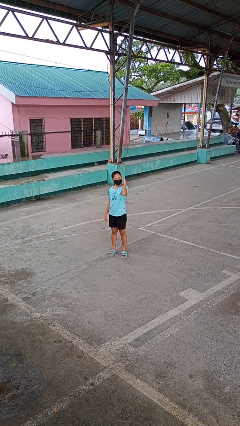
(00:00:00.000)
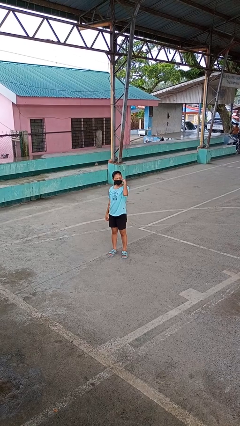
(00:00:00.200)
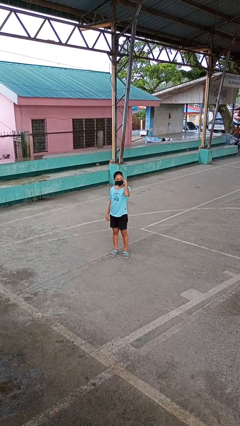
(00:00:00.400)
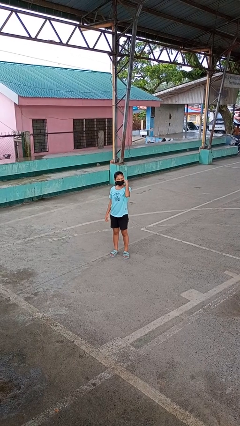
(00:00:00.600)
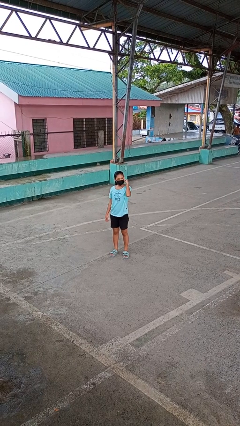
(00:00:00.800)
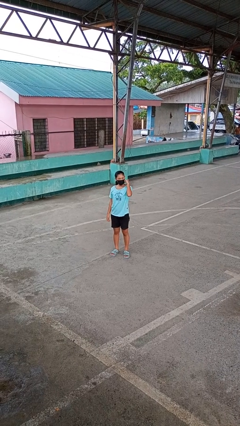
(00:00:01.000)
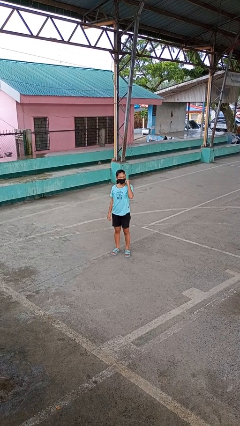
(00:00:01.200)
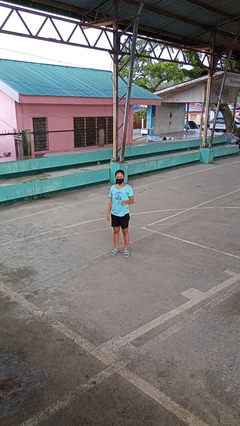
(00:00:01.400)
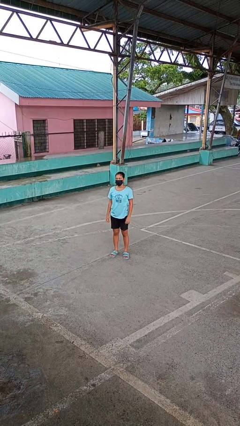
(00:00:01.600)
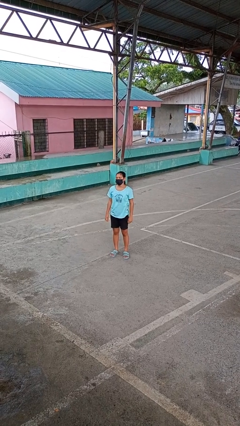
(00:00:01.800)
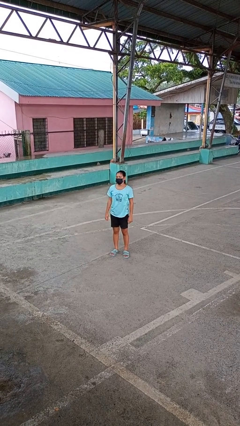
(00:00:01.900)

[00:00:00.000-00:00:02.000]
person gestures behind me

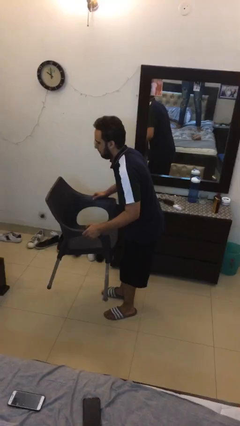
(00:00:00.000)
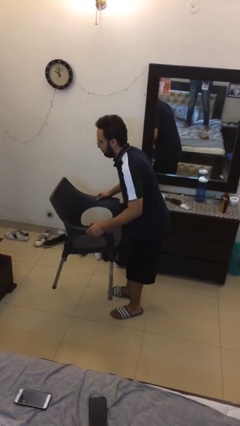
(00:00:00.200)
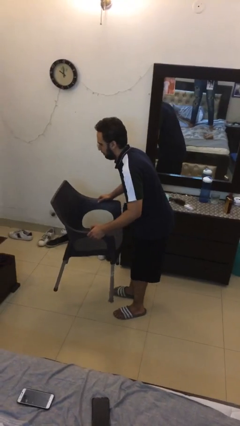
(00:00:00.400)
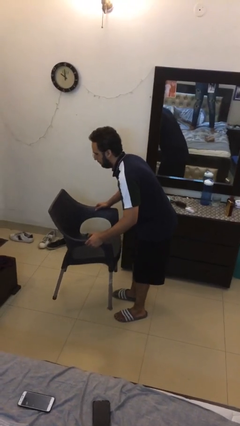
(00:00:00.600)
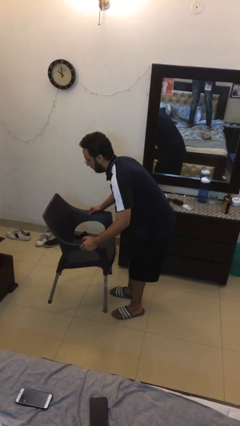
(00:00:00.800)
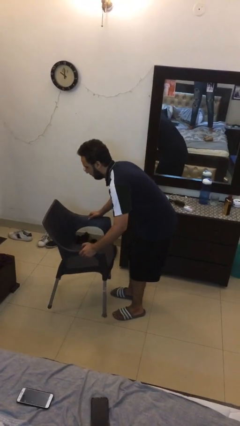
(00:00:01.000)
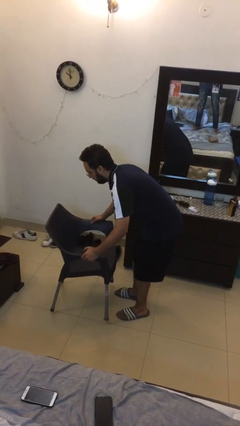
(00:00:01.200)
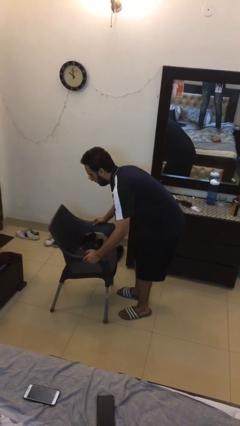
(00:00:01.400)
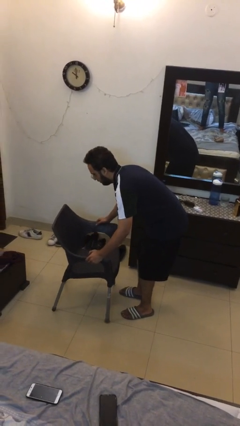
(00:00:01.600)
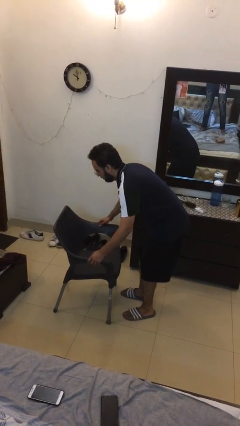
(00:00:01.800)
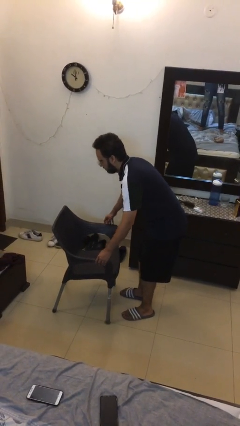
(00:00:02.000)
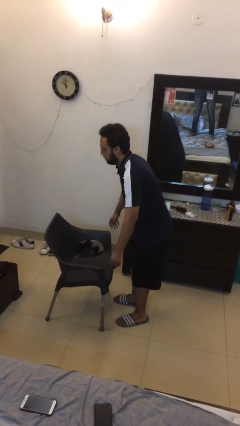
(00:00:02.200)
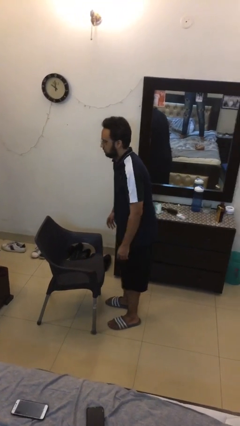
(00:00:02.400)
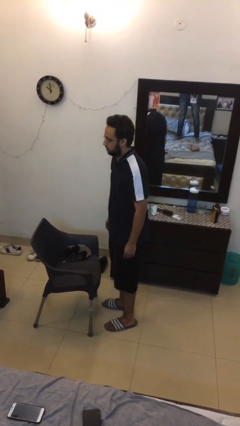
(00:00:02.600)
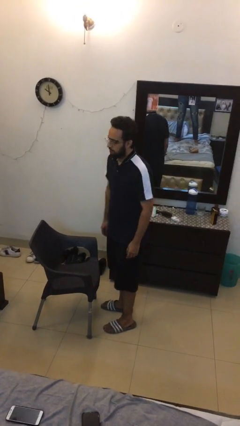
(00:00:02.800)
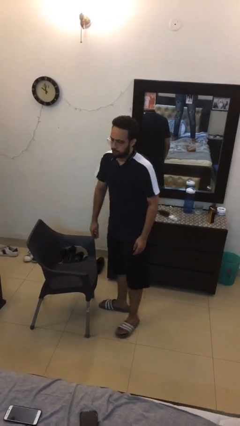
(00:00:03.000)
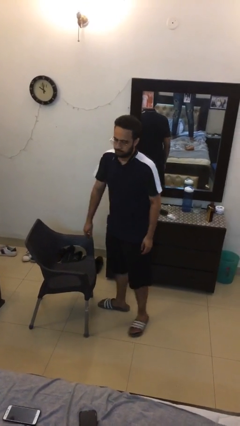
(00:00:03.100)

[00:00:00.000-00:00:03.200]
person puts down object on floor

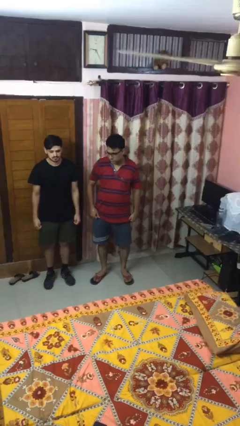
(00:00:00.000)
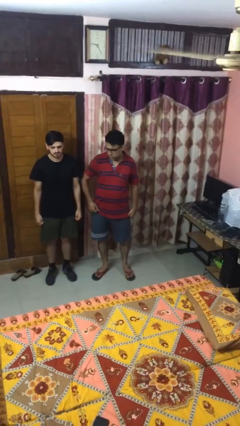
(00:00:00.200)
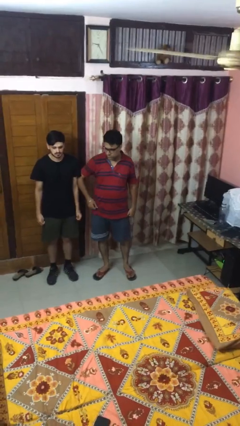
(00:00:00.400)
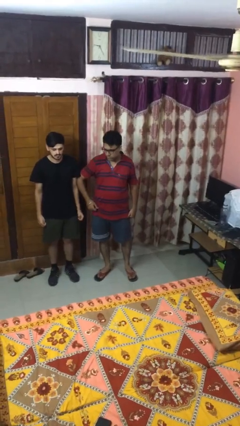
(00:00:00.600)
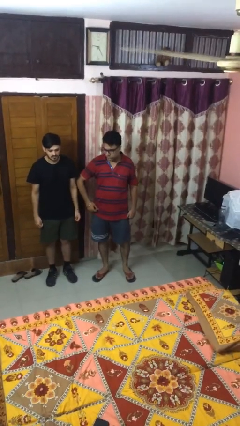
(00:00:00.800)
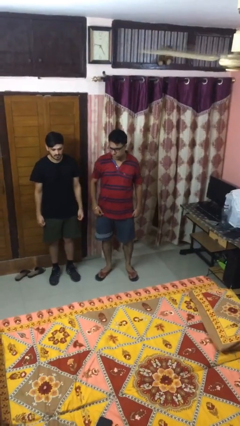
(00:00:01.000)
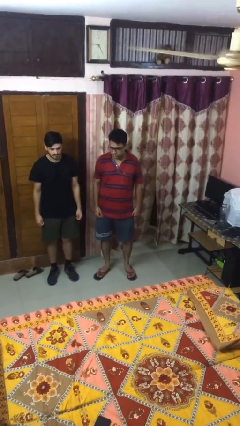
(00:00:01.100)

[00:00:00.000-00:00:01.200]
person nudges person with elbow

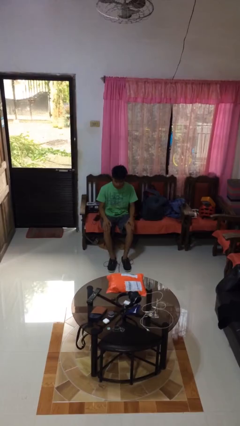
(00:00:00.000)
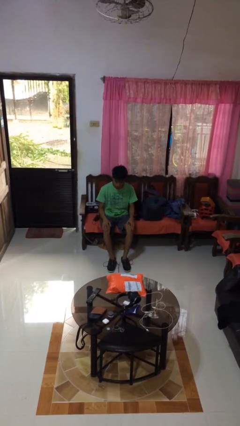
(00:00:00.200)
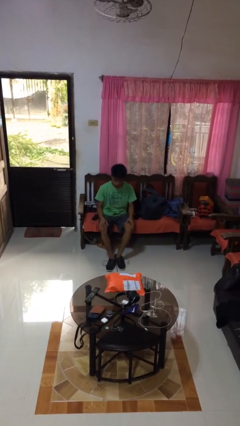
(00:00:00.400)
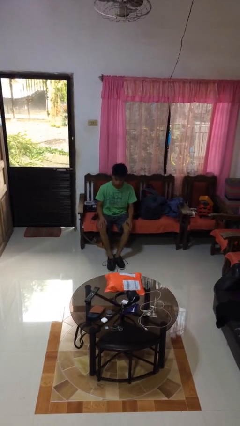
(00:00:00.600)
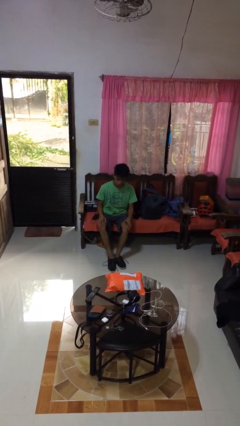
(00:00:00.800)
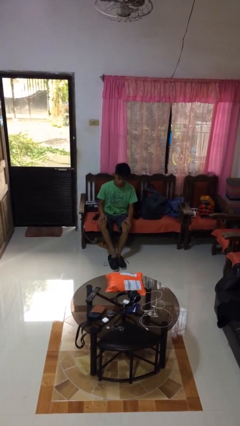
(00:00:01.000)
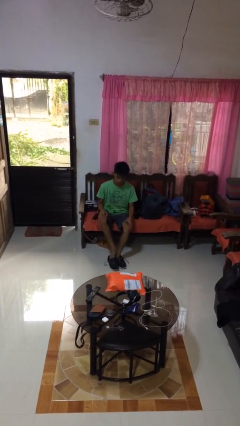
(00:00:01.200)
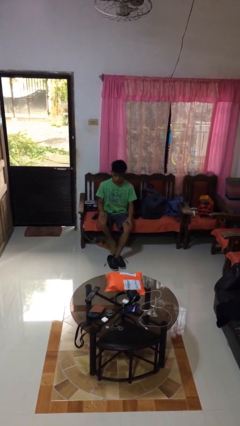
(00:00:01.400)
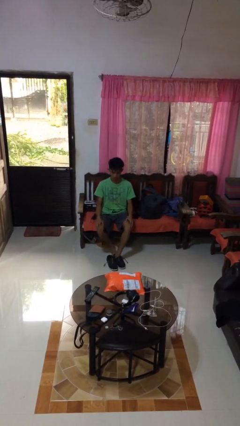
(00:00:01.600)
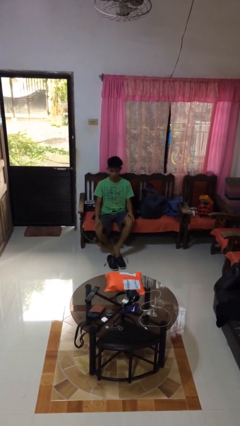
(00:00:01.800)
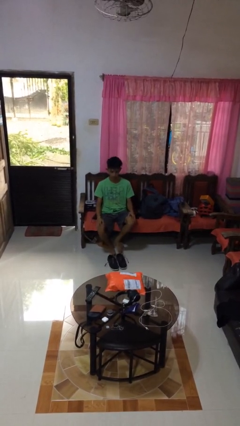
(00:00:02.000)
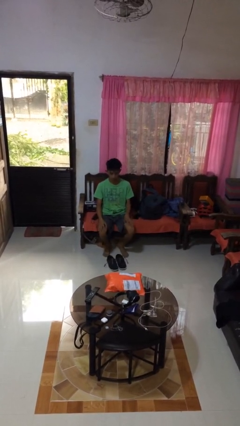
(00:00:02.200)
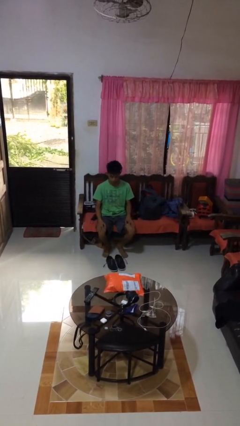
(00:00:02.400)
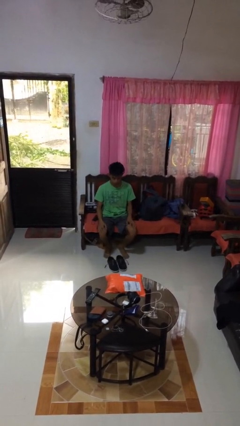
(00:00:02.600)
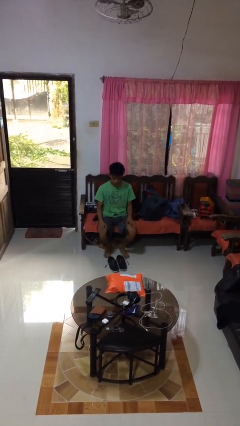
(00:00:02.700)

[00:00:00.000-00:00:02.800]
person takes off shoes

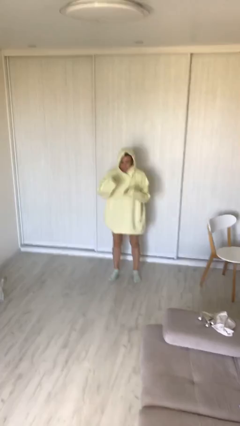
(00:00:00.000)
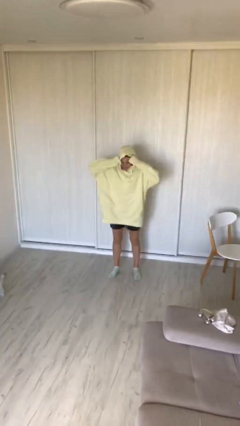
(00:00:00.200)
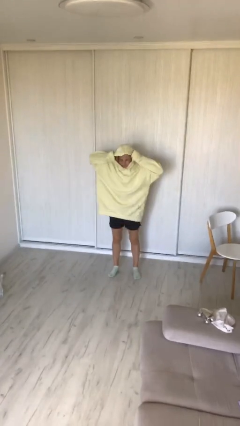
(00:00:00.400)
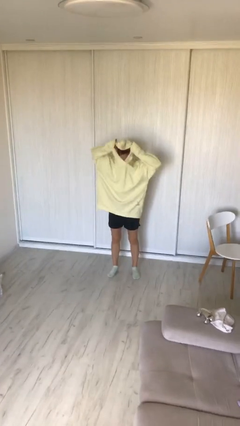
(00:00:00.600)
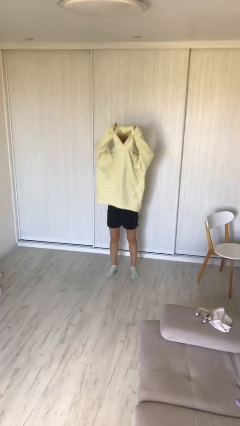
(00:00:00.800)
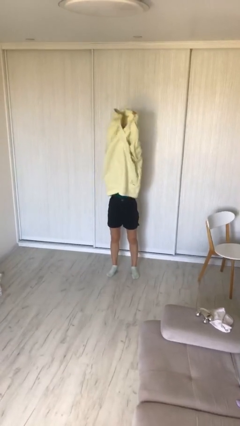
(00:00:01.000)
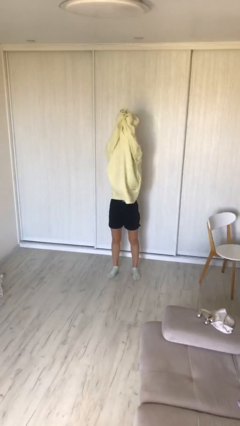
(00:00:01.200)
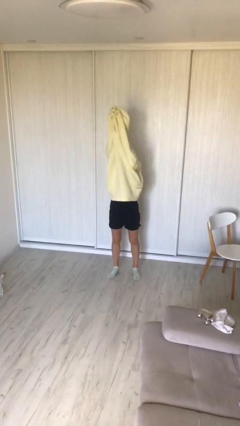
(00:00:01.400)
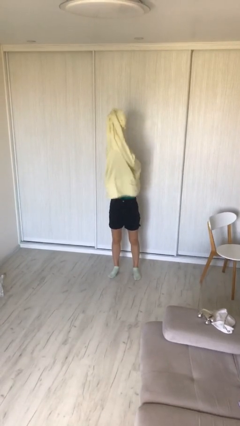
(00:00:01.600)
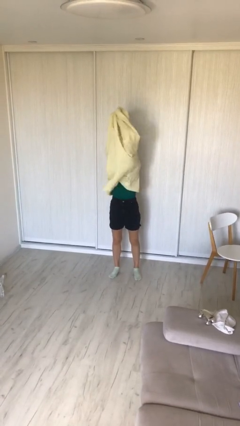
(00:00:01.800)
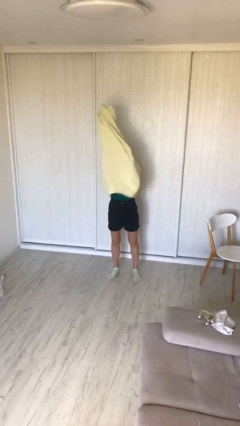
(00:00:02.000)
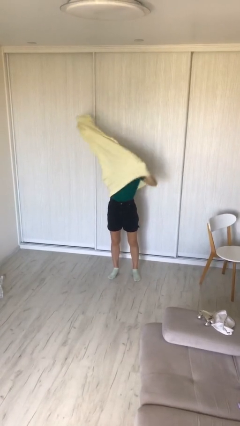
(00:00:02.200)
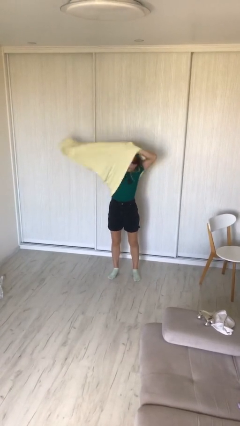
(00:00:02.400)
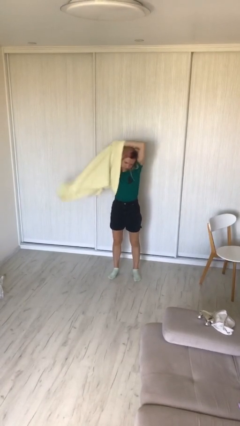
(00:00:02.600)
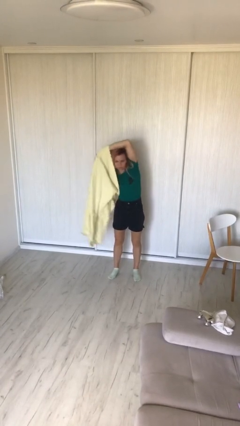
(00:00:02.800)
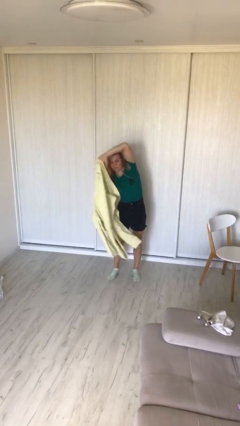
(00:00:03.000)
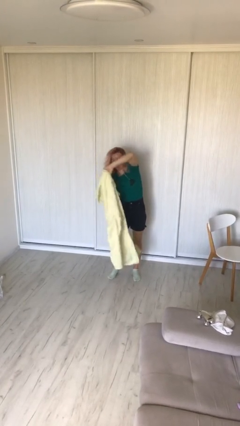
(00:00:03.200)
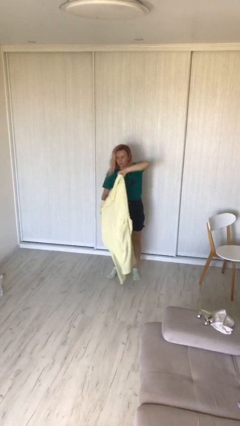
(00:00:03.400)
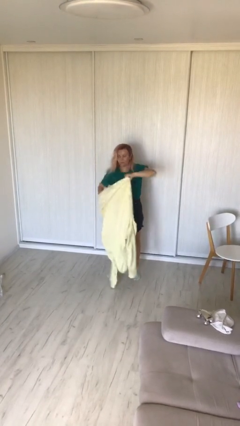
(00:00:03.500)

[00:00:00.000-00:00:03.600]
person takes off hoodie

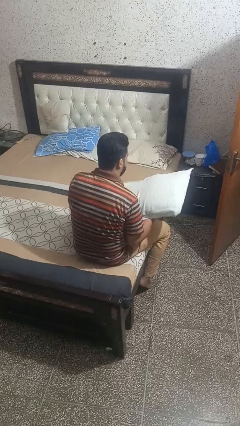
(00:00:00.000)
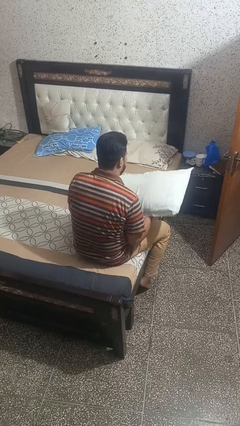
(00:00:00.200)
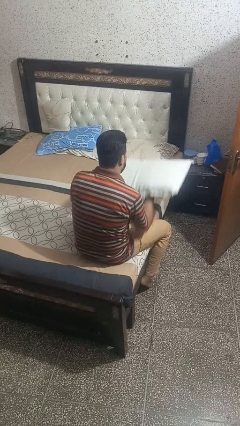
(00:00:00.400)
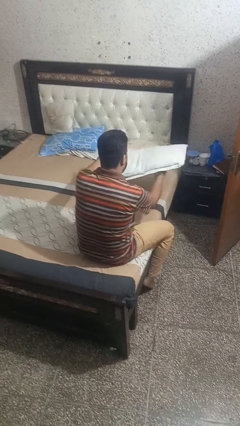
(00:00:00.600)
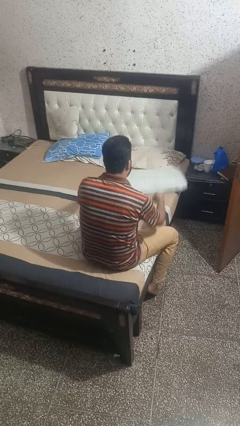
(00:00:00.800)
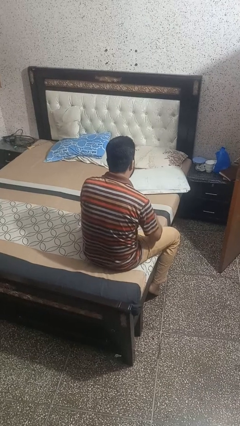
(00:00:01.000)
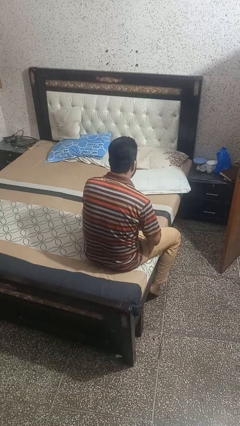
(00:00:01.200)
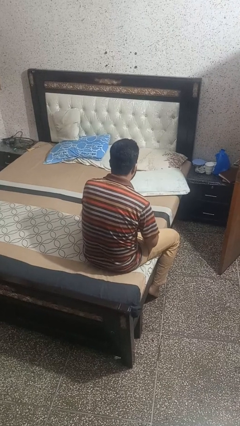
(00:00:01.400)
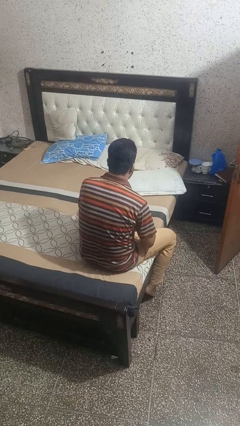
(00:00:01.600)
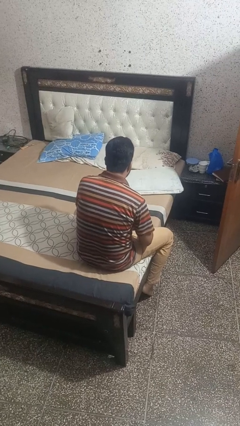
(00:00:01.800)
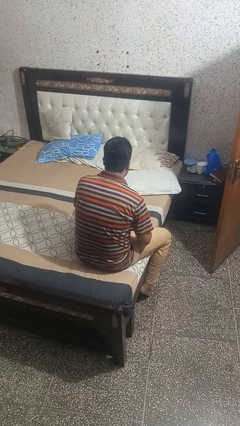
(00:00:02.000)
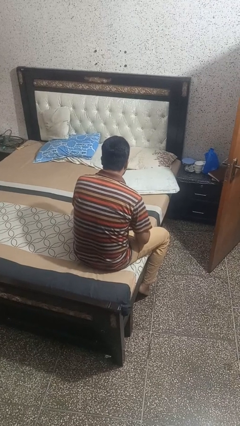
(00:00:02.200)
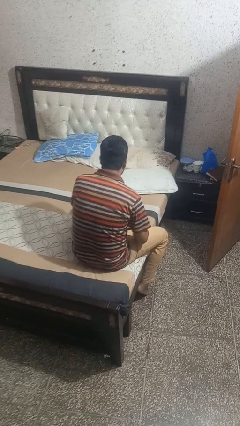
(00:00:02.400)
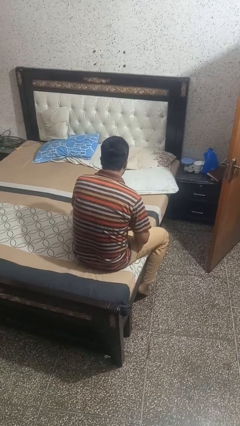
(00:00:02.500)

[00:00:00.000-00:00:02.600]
person puts down object on bed

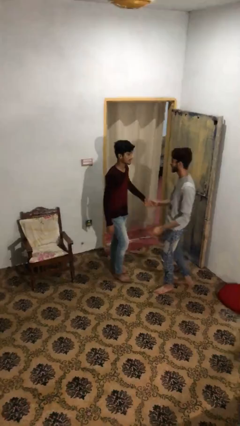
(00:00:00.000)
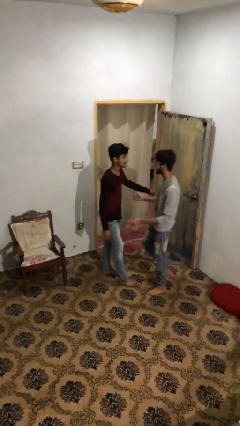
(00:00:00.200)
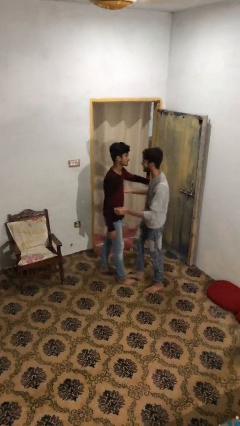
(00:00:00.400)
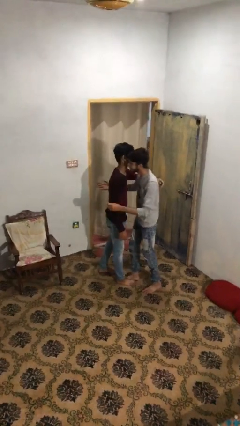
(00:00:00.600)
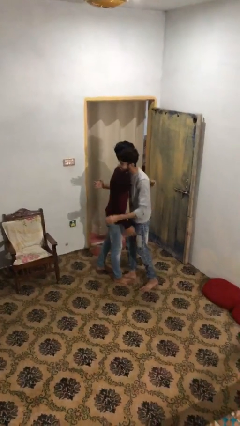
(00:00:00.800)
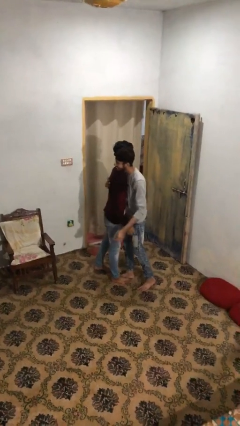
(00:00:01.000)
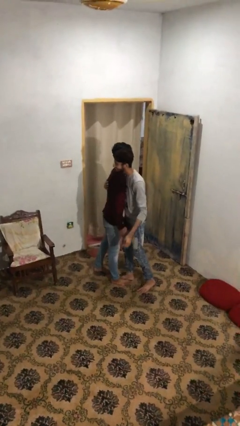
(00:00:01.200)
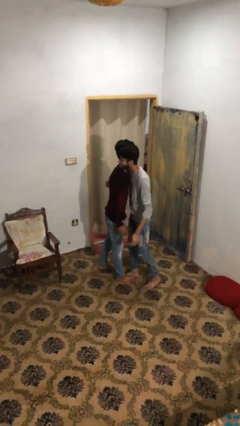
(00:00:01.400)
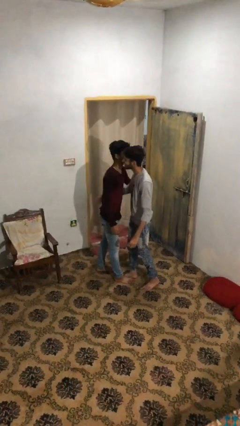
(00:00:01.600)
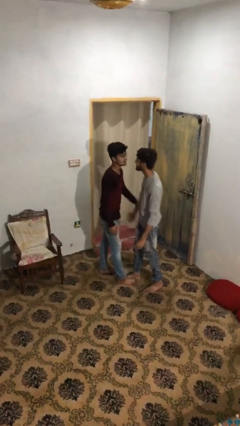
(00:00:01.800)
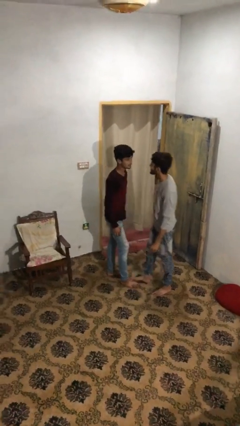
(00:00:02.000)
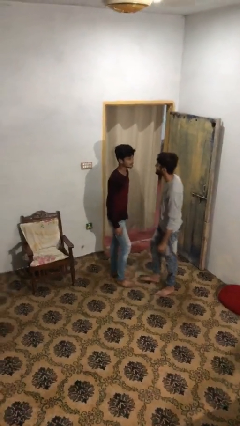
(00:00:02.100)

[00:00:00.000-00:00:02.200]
person embraces person
